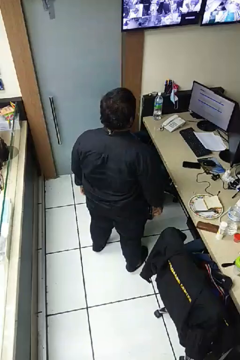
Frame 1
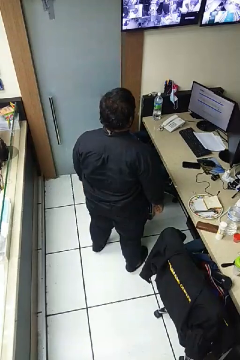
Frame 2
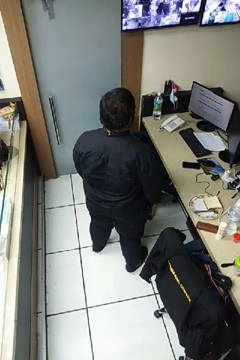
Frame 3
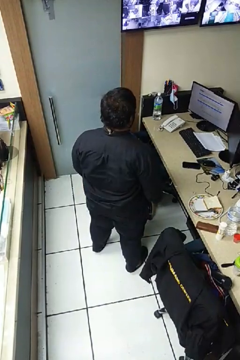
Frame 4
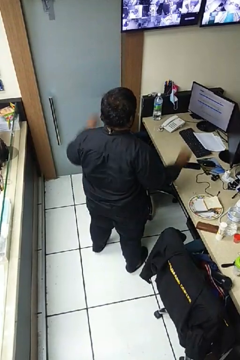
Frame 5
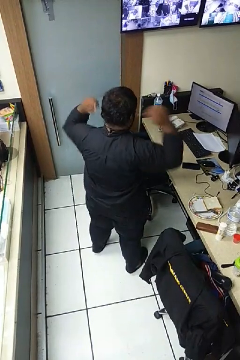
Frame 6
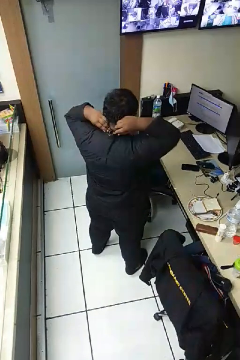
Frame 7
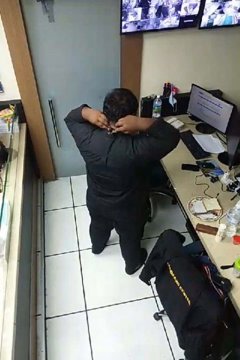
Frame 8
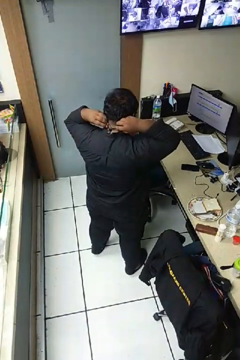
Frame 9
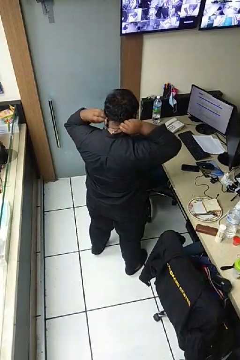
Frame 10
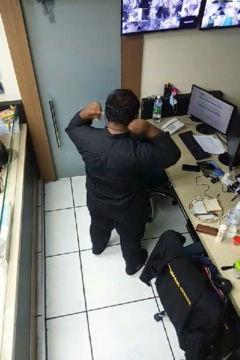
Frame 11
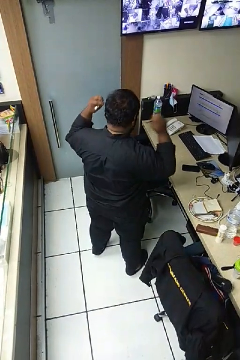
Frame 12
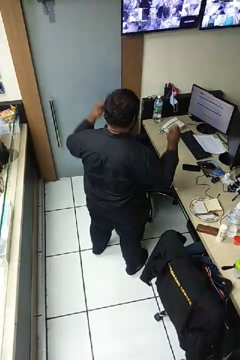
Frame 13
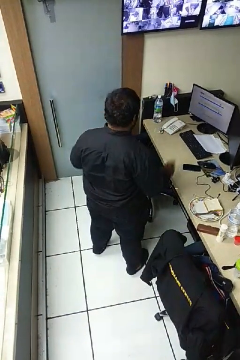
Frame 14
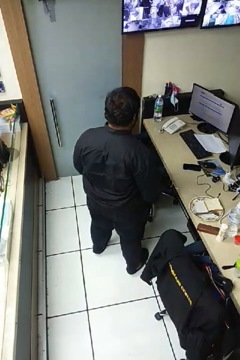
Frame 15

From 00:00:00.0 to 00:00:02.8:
person takes off necklace

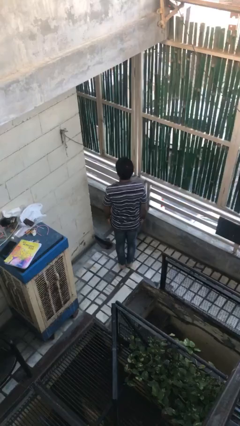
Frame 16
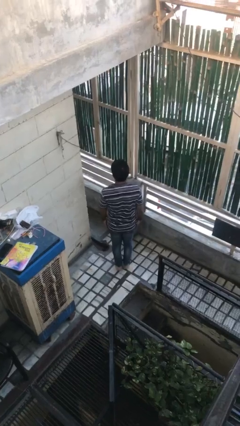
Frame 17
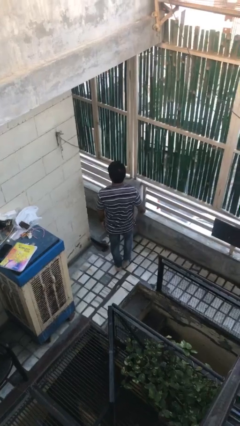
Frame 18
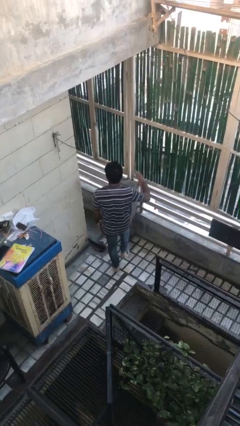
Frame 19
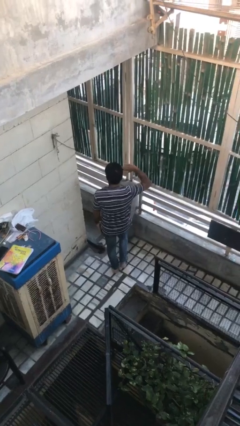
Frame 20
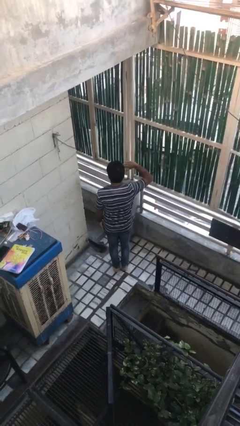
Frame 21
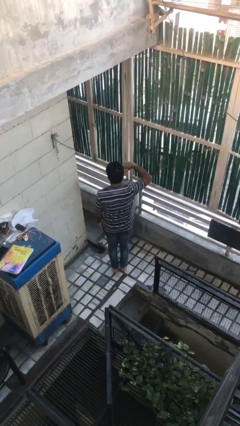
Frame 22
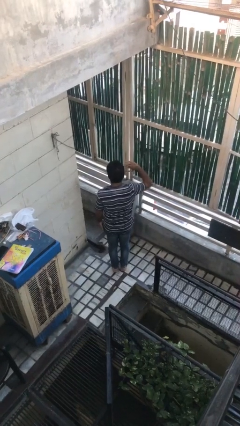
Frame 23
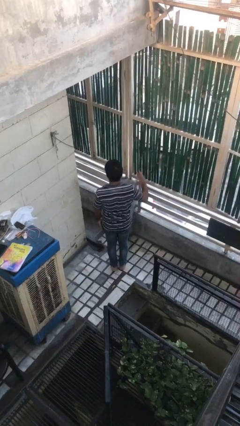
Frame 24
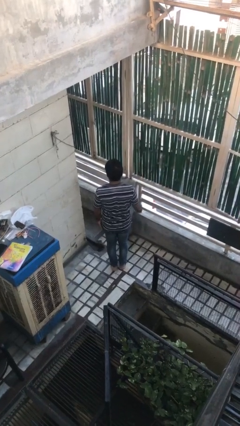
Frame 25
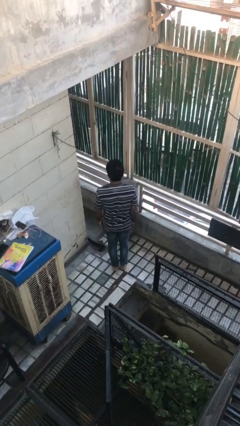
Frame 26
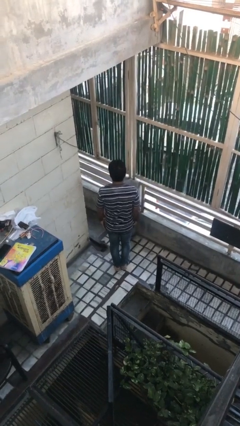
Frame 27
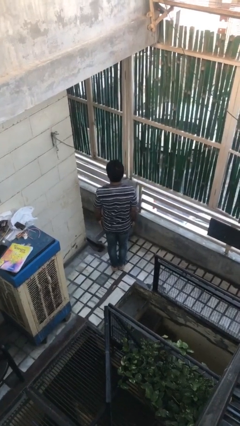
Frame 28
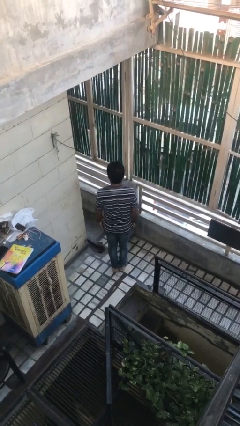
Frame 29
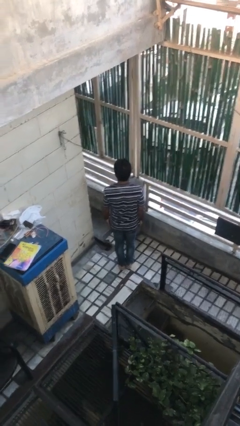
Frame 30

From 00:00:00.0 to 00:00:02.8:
person salutes

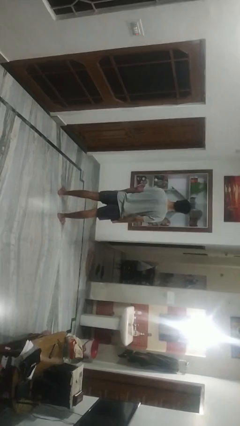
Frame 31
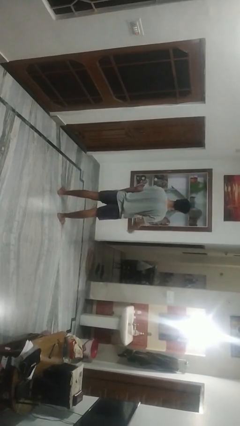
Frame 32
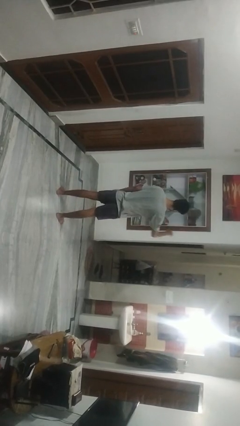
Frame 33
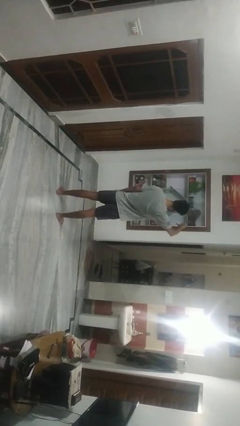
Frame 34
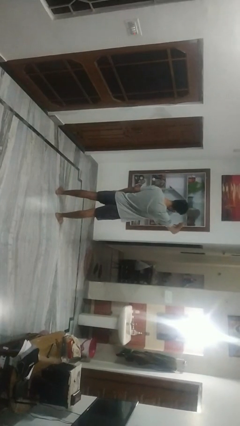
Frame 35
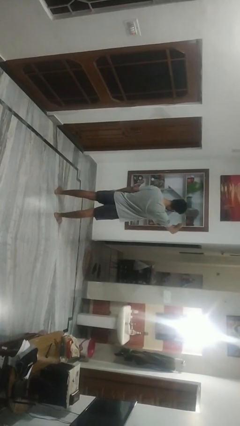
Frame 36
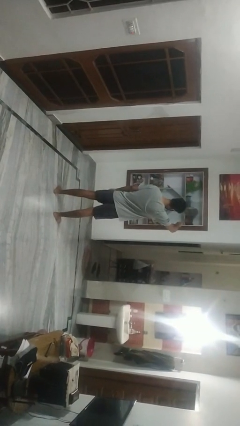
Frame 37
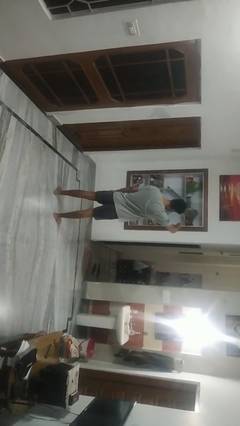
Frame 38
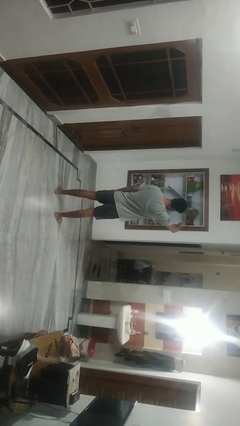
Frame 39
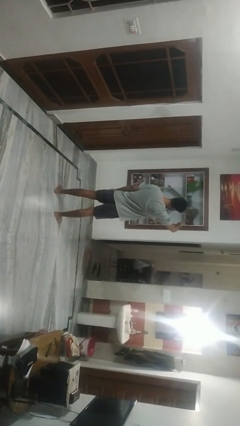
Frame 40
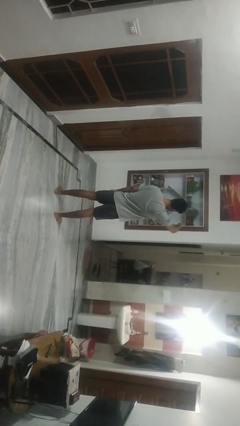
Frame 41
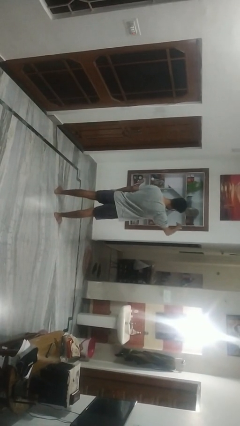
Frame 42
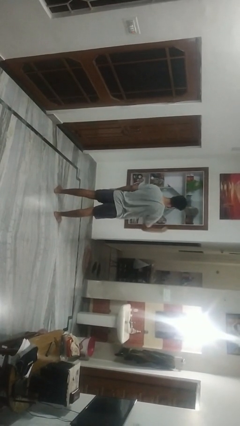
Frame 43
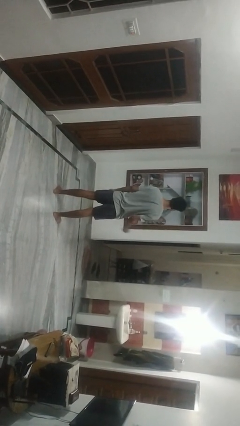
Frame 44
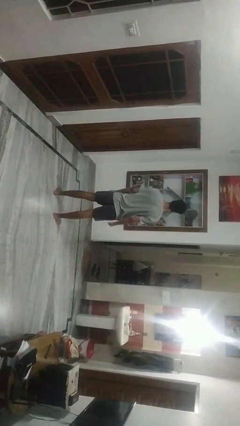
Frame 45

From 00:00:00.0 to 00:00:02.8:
person gestures thumbs down

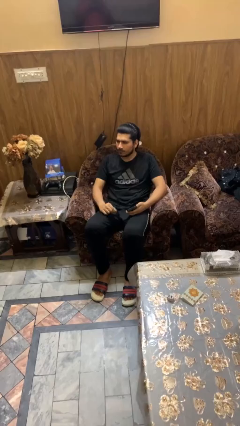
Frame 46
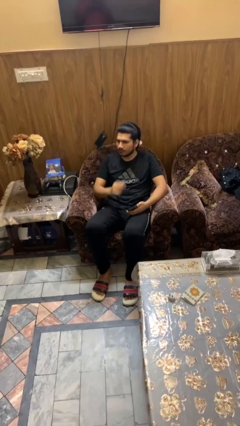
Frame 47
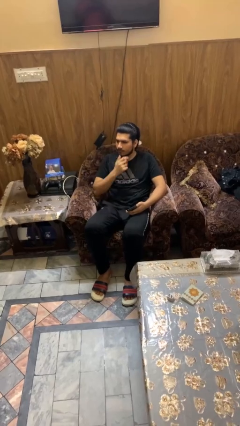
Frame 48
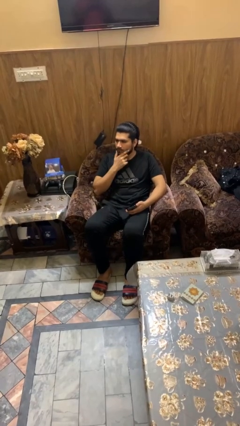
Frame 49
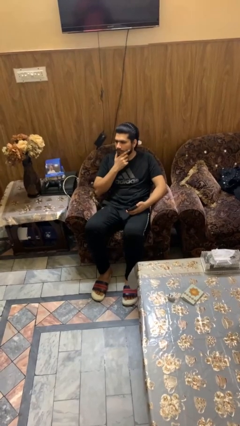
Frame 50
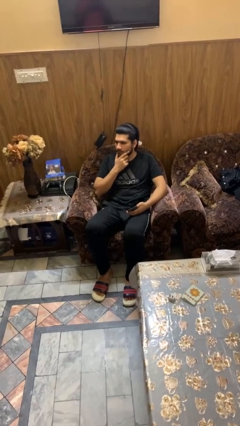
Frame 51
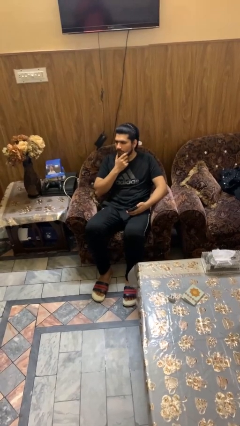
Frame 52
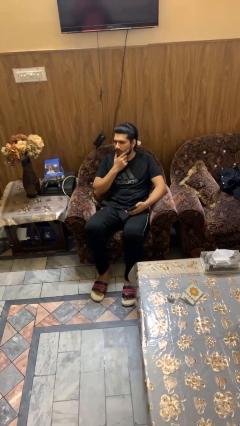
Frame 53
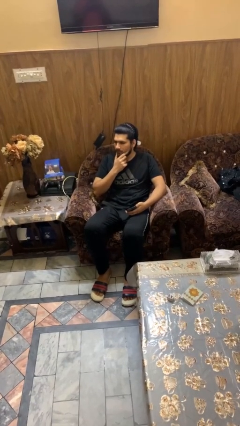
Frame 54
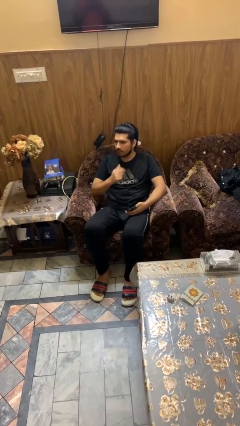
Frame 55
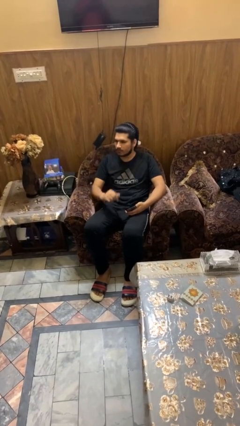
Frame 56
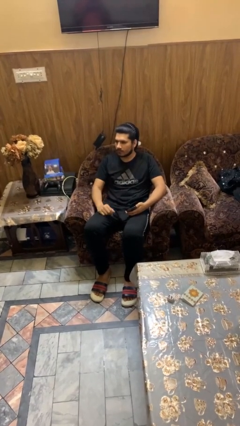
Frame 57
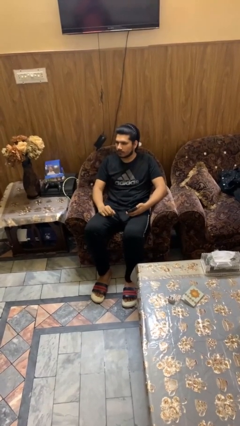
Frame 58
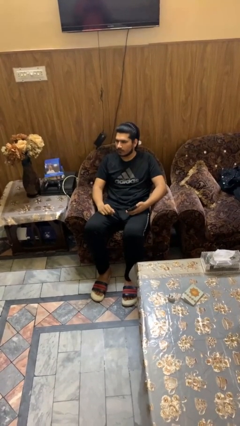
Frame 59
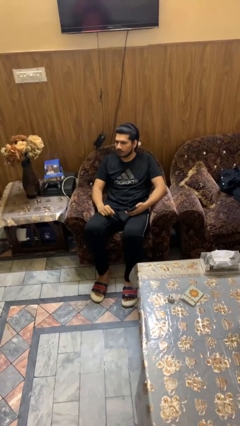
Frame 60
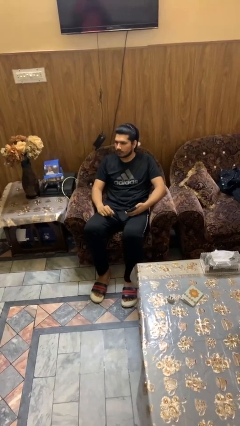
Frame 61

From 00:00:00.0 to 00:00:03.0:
person strokes chin

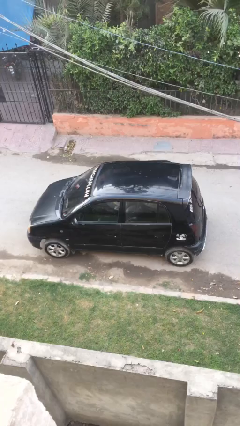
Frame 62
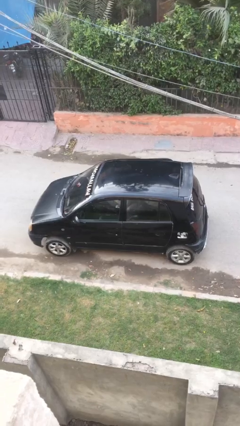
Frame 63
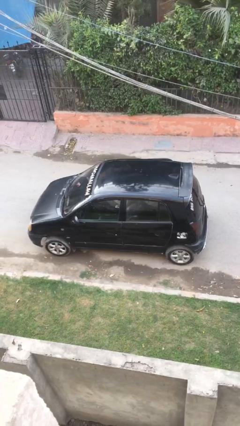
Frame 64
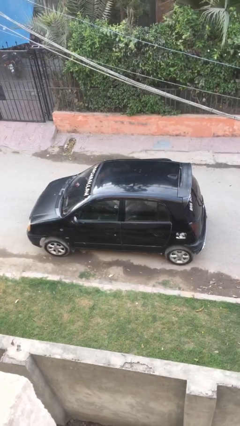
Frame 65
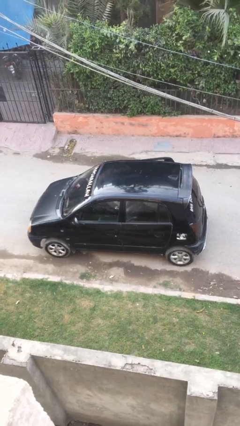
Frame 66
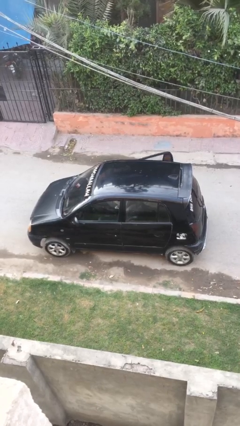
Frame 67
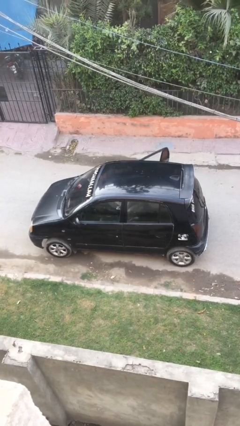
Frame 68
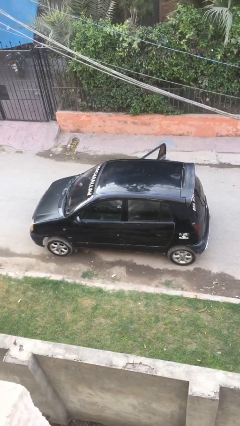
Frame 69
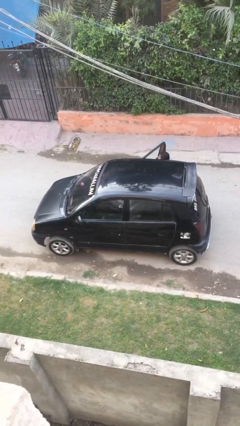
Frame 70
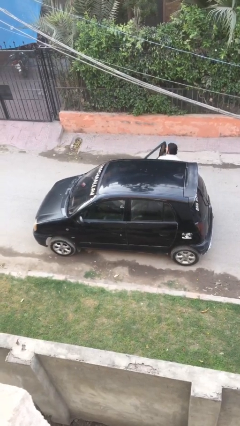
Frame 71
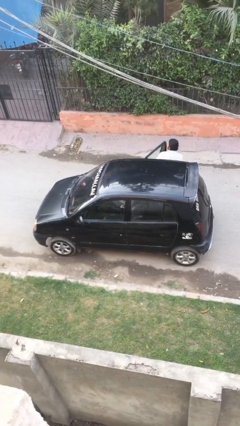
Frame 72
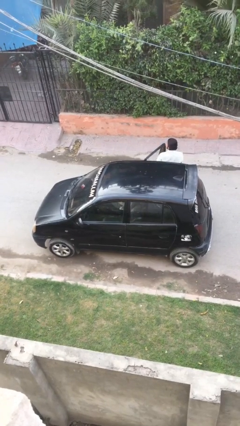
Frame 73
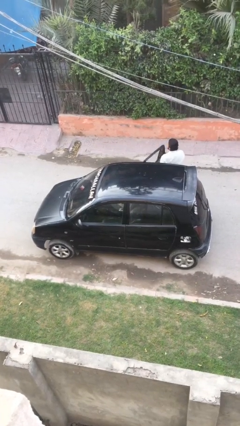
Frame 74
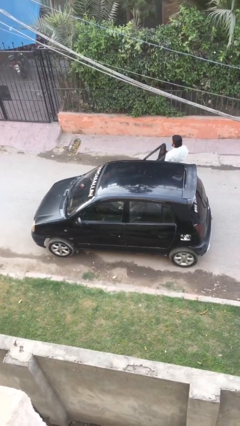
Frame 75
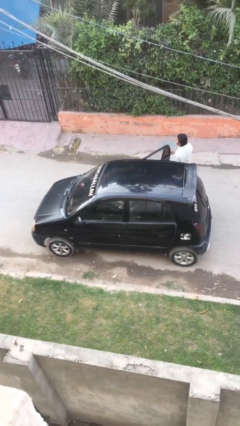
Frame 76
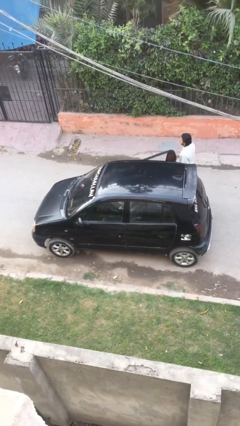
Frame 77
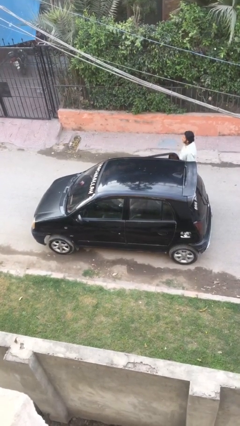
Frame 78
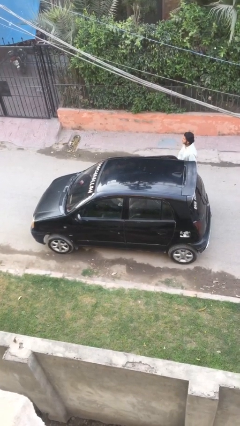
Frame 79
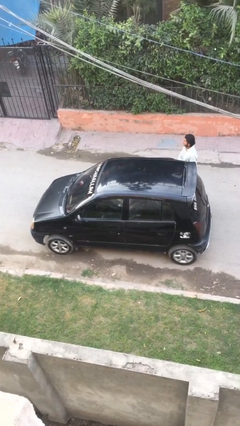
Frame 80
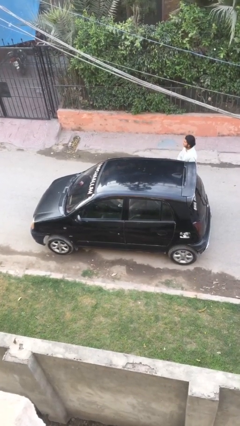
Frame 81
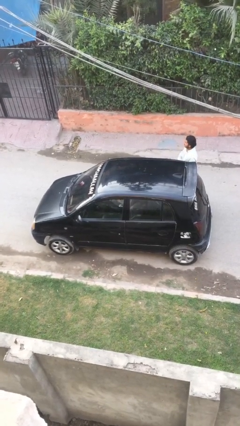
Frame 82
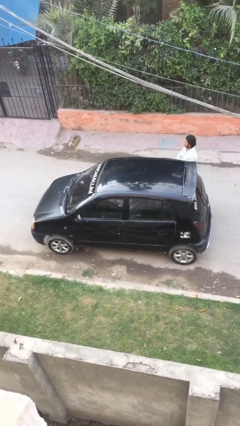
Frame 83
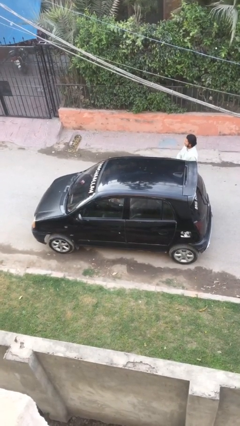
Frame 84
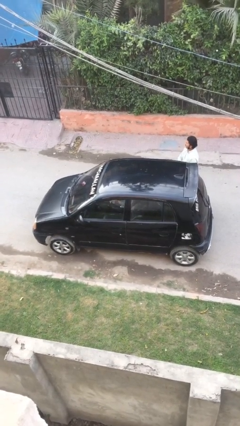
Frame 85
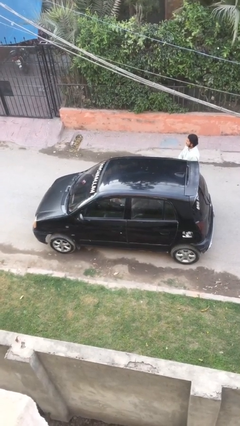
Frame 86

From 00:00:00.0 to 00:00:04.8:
car drops off person

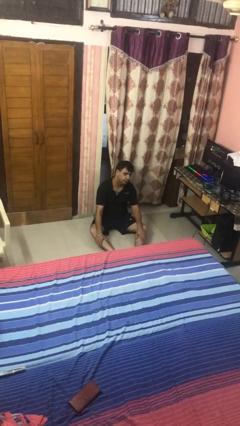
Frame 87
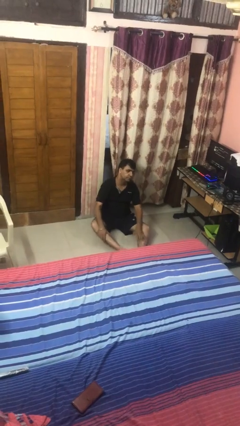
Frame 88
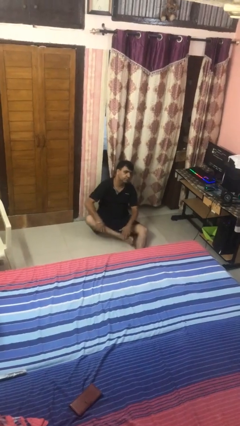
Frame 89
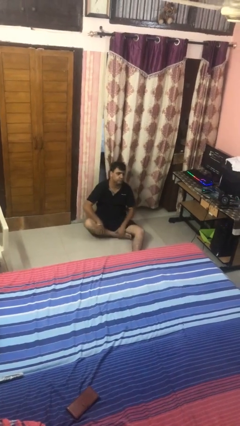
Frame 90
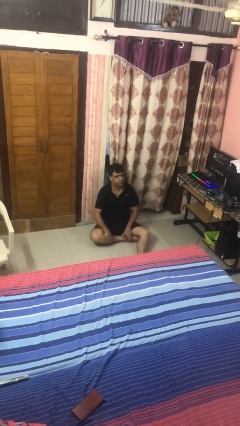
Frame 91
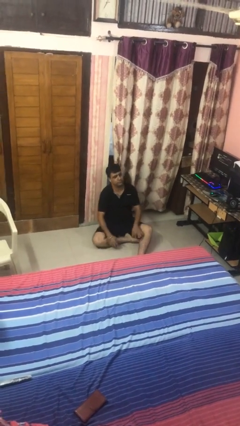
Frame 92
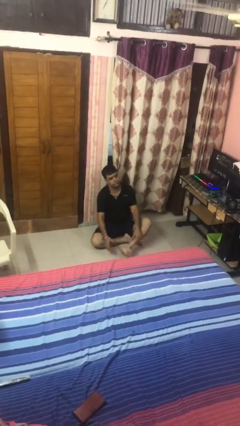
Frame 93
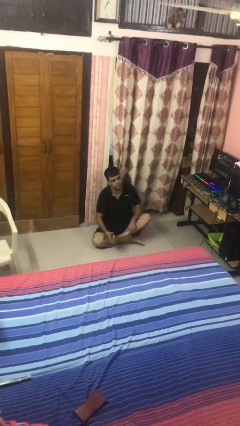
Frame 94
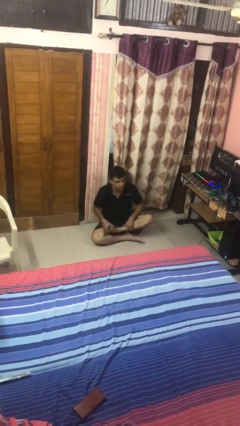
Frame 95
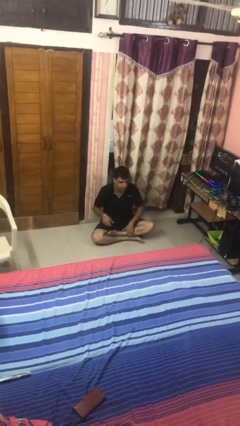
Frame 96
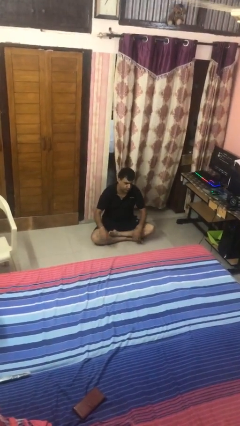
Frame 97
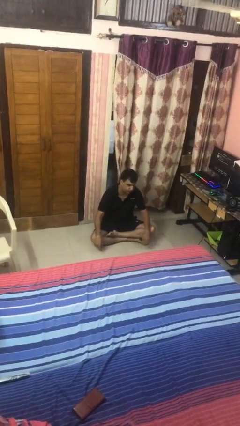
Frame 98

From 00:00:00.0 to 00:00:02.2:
person crosses legs
